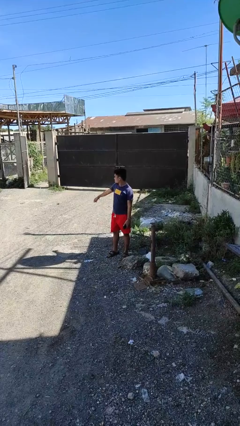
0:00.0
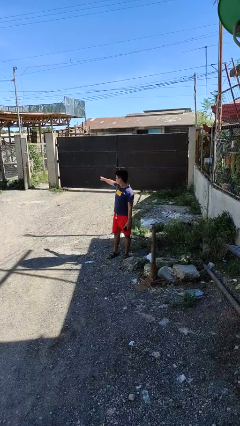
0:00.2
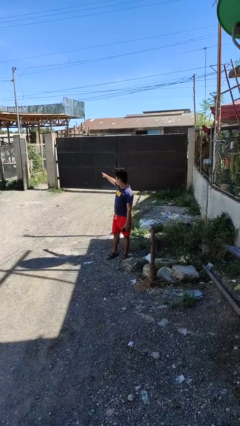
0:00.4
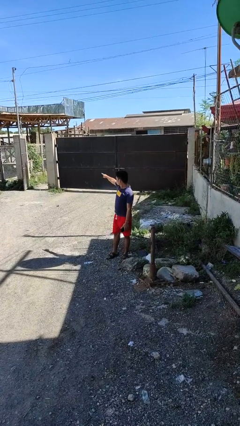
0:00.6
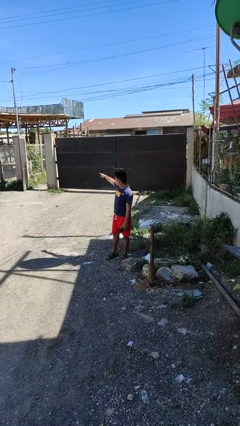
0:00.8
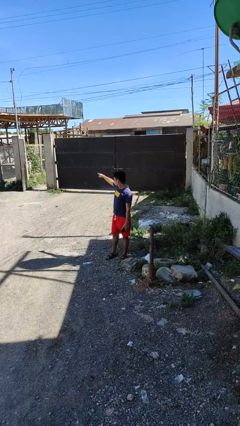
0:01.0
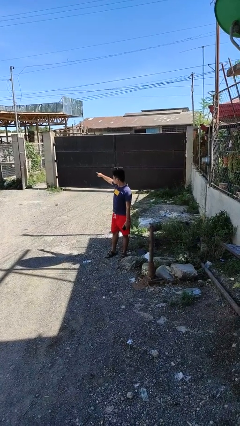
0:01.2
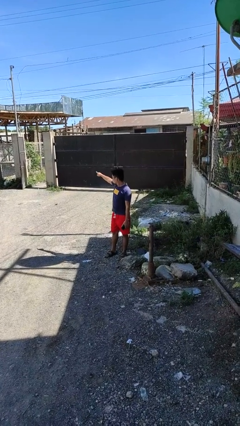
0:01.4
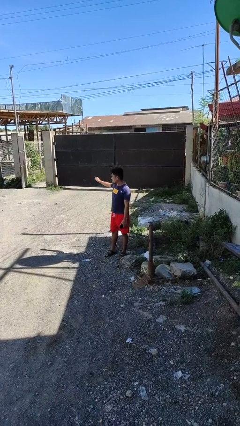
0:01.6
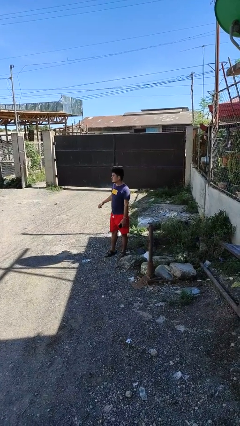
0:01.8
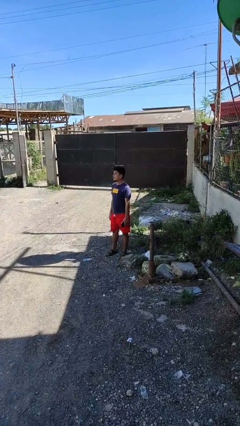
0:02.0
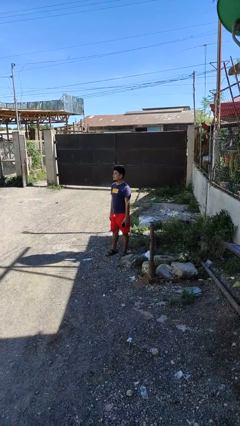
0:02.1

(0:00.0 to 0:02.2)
person points at person

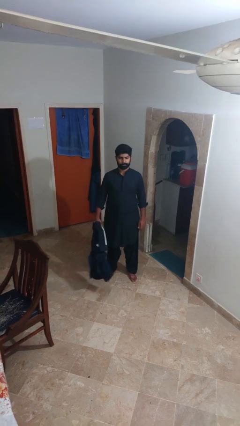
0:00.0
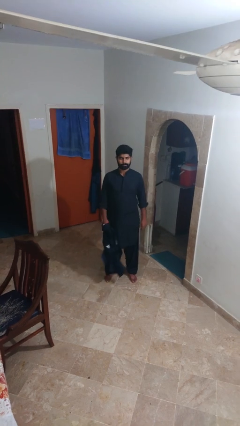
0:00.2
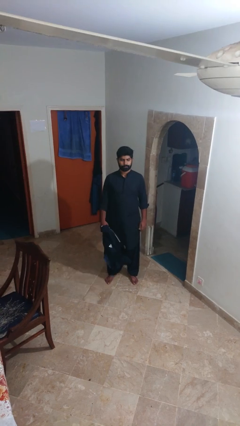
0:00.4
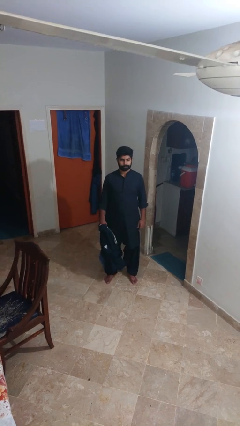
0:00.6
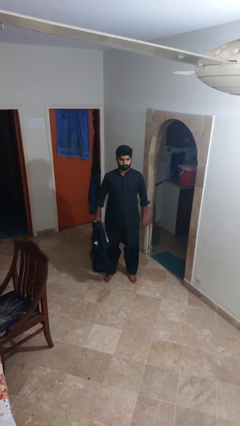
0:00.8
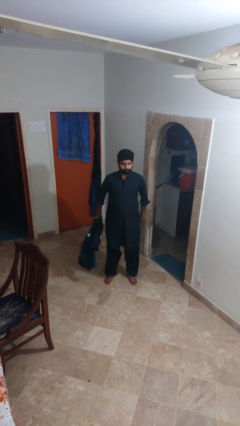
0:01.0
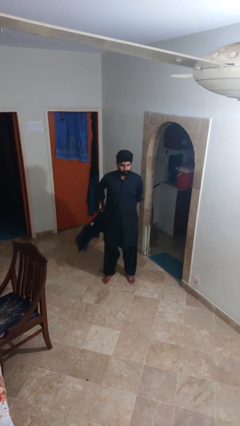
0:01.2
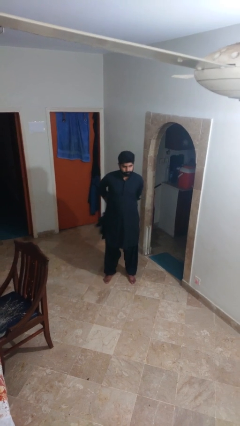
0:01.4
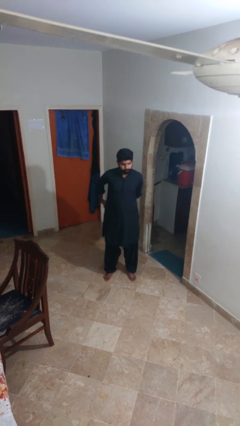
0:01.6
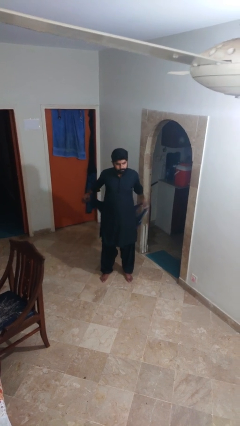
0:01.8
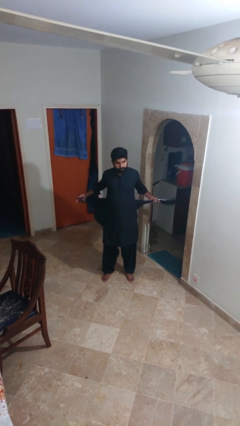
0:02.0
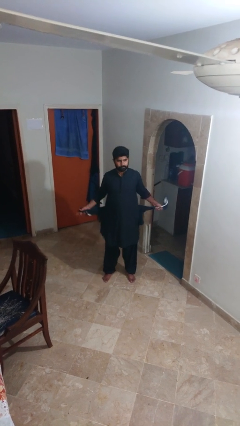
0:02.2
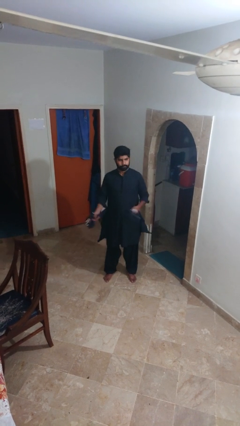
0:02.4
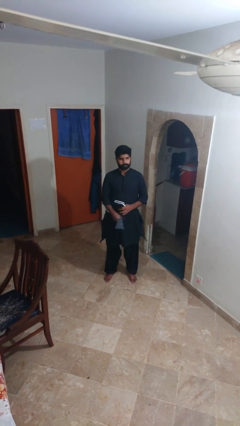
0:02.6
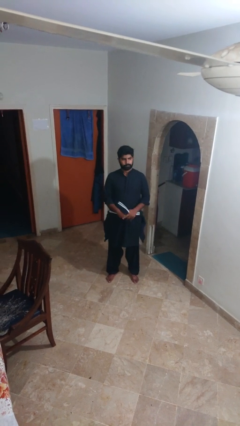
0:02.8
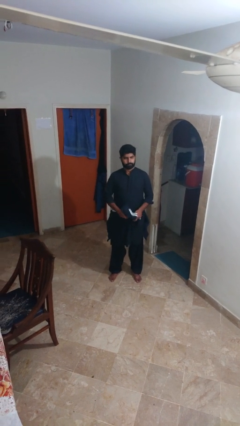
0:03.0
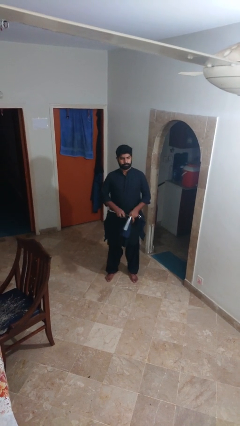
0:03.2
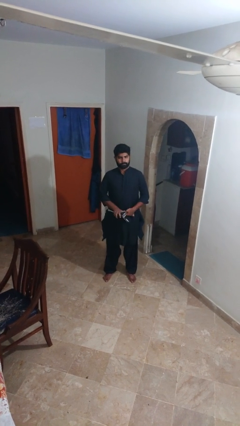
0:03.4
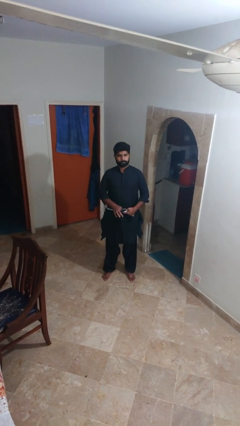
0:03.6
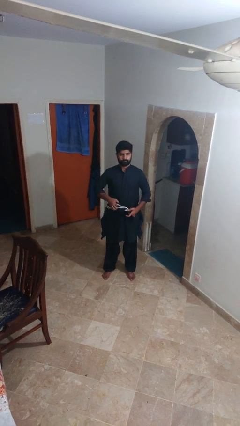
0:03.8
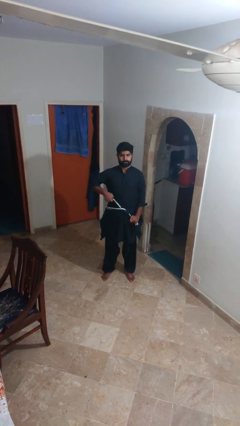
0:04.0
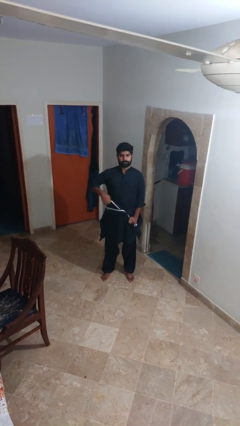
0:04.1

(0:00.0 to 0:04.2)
person ties jacket around waist

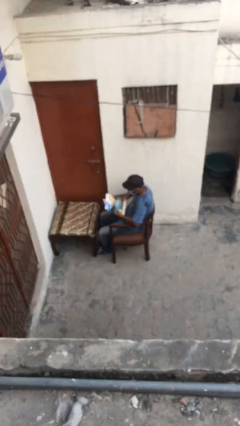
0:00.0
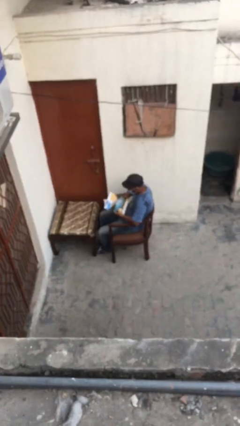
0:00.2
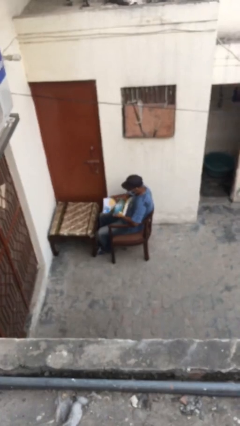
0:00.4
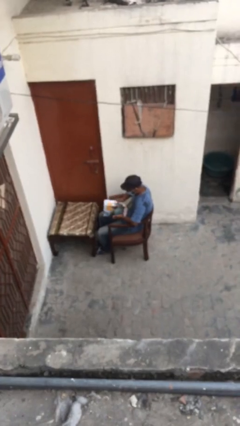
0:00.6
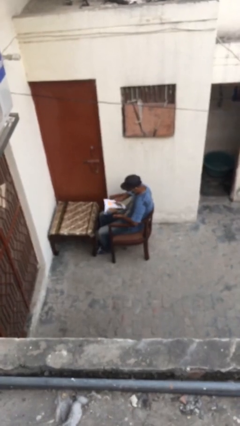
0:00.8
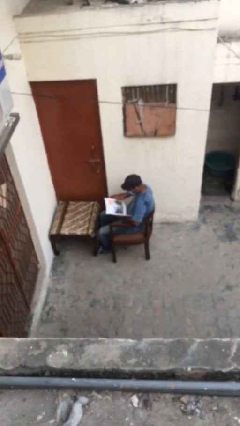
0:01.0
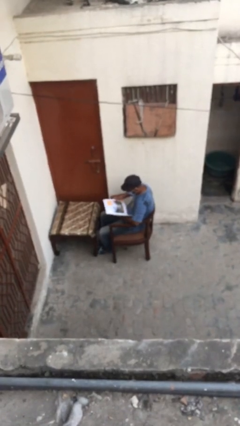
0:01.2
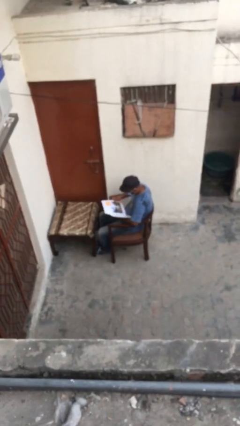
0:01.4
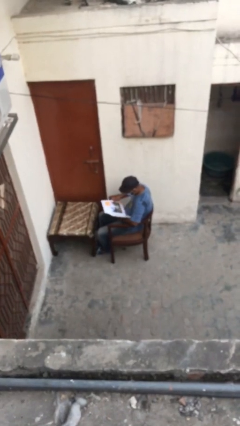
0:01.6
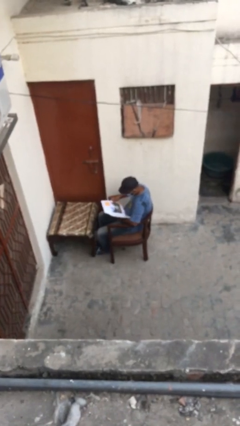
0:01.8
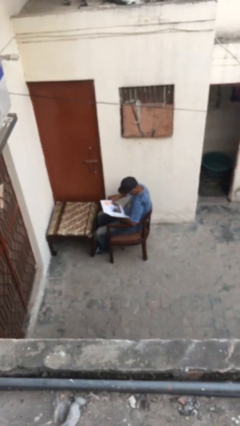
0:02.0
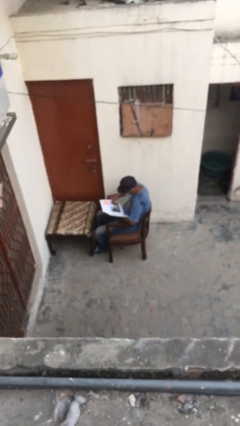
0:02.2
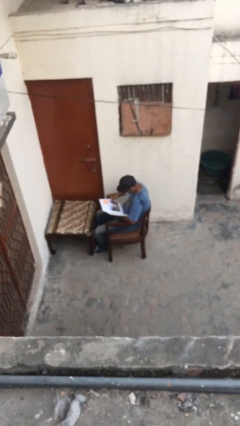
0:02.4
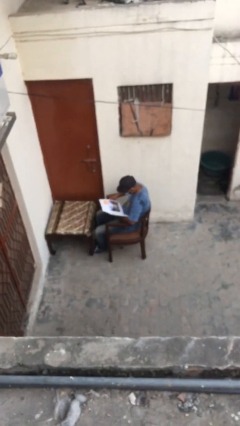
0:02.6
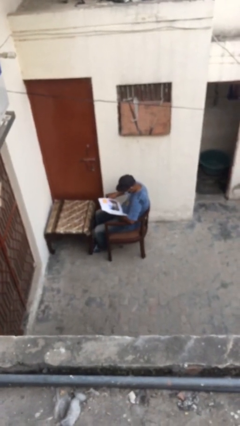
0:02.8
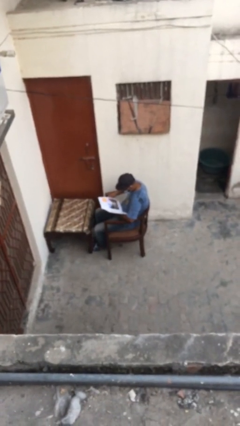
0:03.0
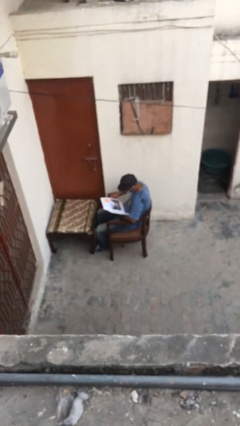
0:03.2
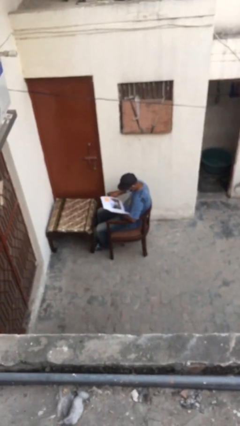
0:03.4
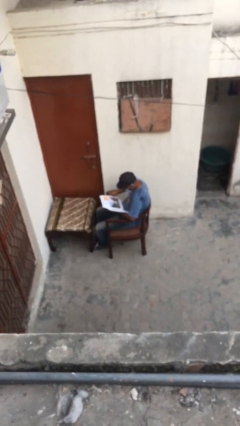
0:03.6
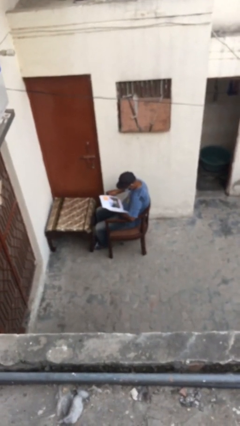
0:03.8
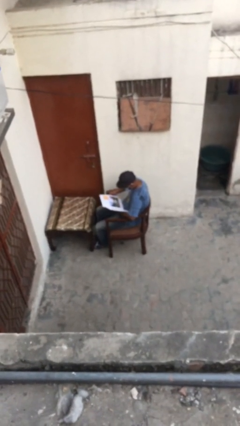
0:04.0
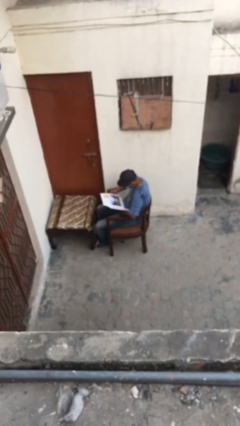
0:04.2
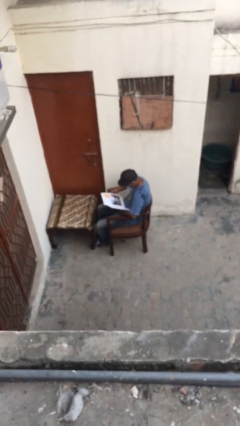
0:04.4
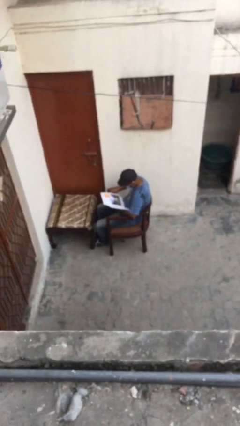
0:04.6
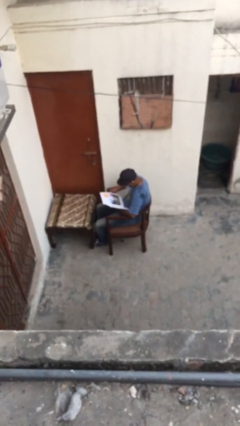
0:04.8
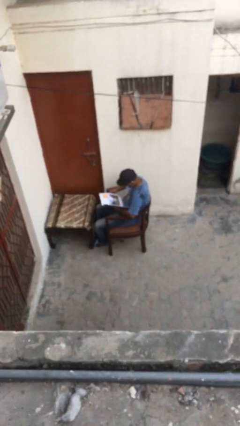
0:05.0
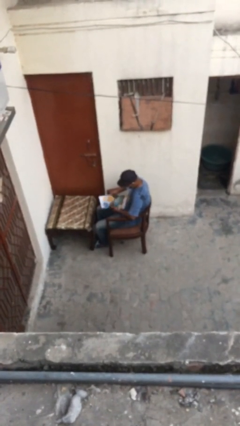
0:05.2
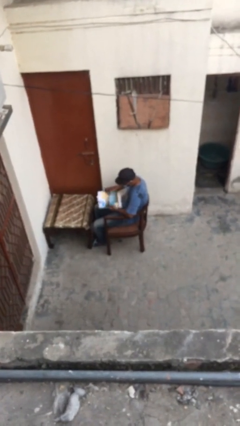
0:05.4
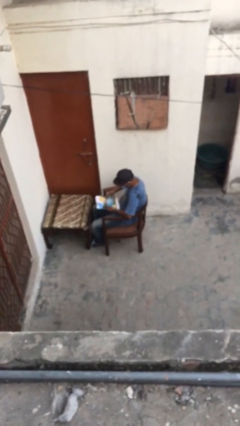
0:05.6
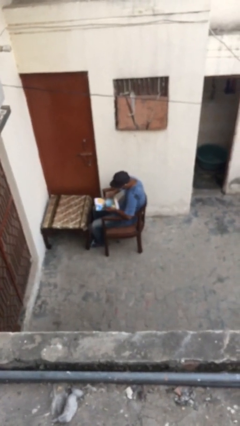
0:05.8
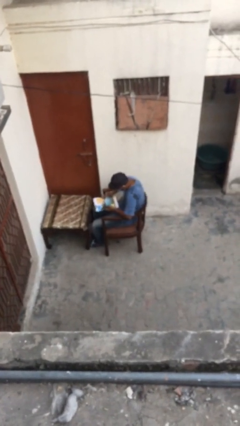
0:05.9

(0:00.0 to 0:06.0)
person reads document

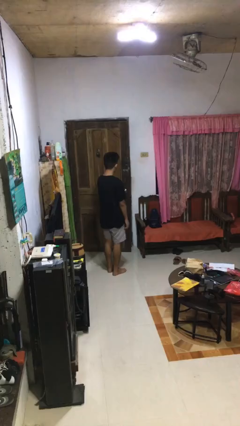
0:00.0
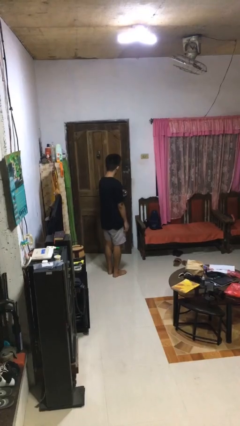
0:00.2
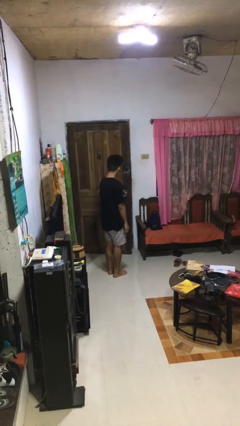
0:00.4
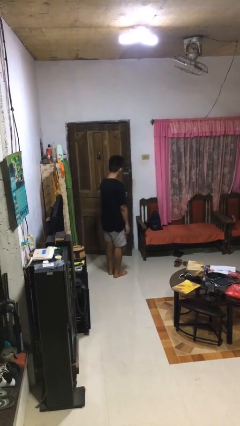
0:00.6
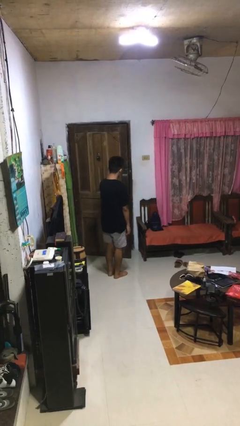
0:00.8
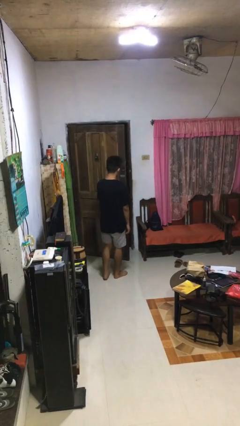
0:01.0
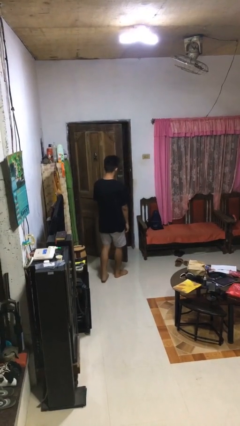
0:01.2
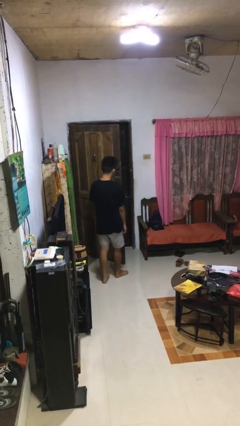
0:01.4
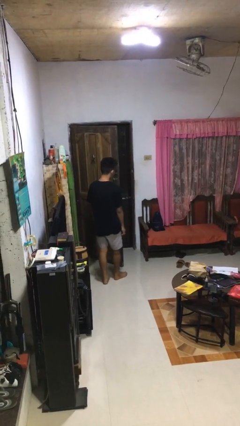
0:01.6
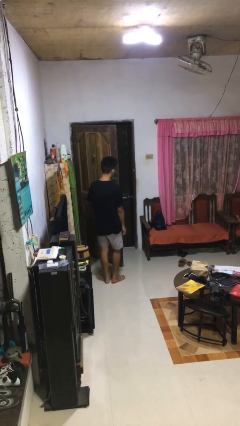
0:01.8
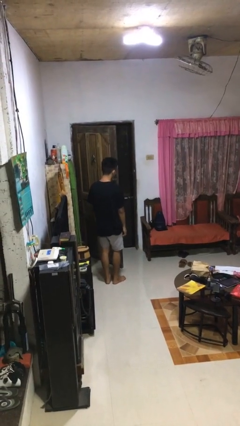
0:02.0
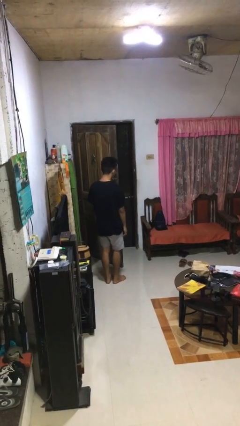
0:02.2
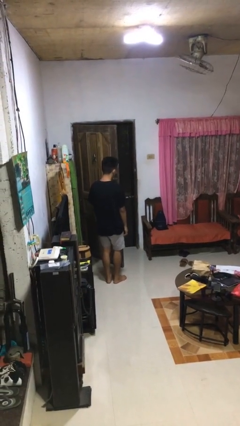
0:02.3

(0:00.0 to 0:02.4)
person opens facility door

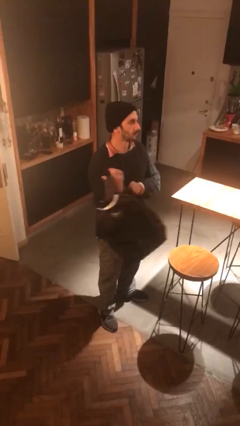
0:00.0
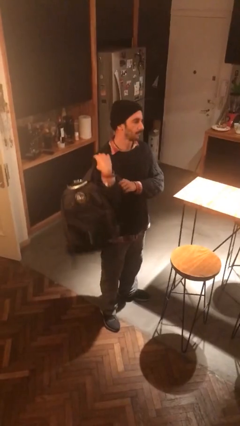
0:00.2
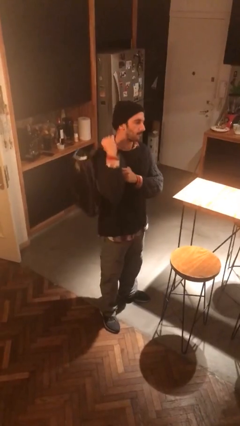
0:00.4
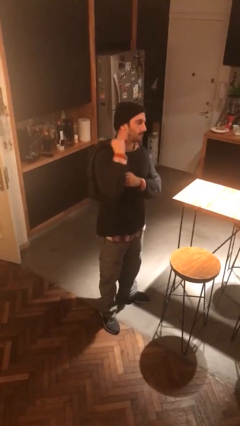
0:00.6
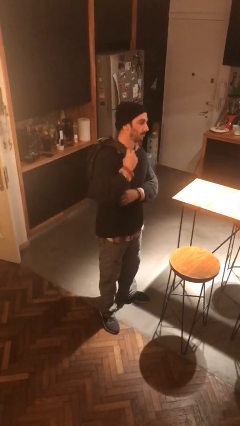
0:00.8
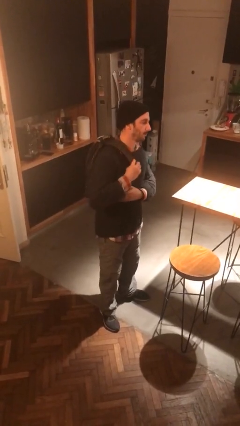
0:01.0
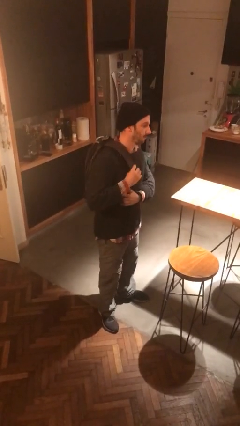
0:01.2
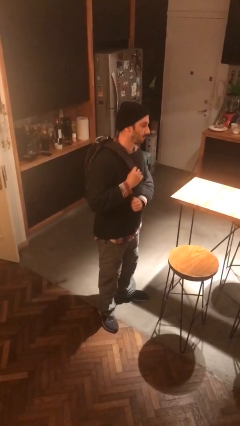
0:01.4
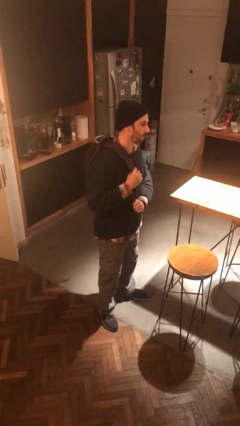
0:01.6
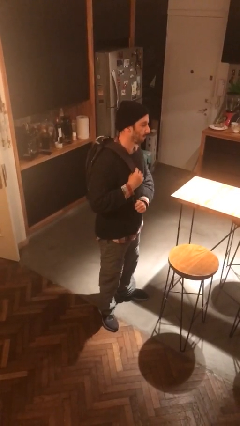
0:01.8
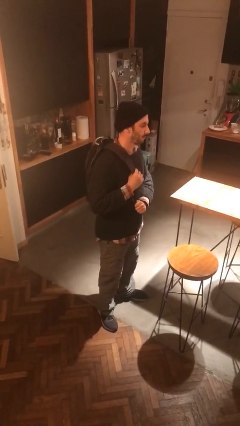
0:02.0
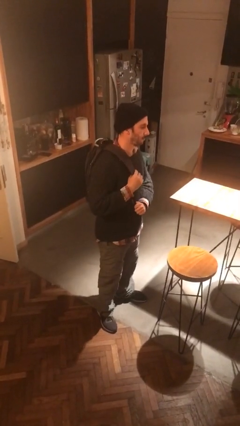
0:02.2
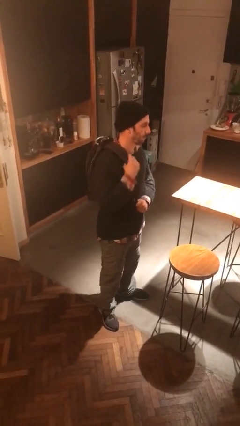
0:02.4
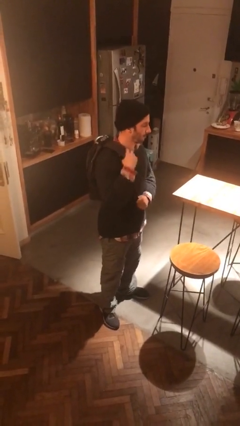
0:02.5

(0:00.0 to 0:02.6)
person puts on backpack
